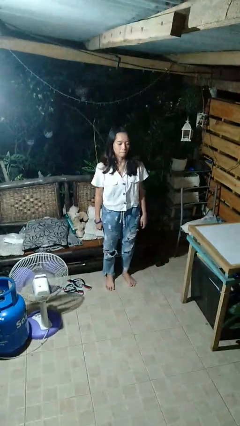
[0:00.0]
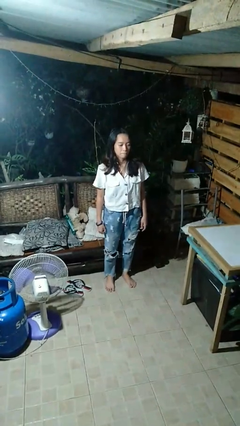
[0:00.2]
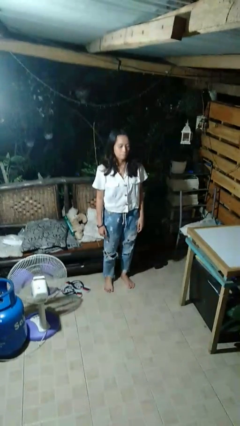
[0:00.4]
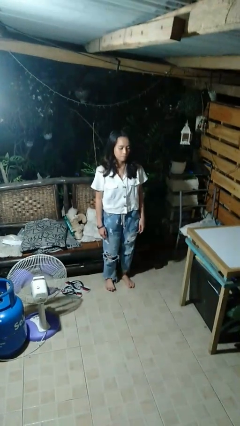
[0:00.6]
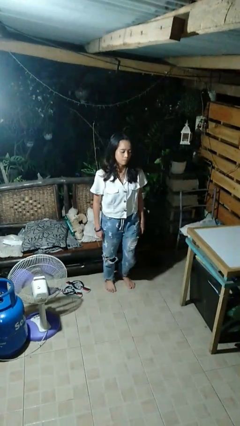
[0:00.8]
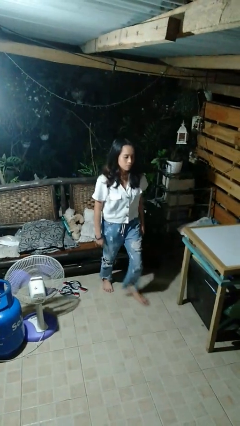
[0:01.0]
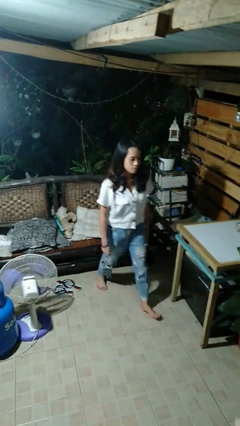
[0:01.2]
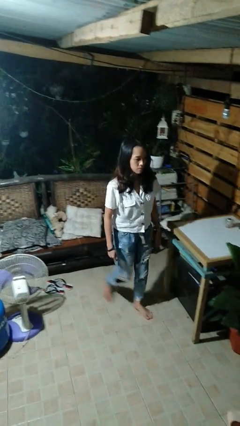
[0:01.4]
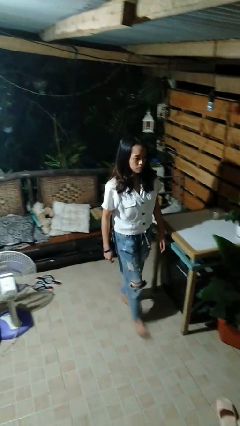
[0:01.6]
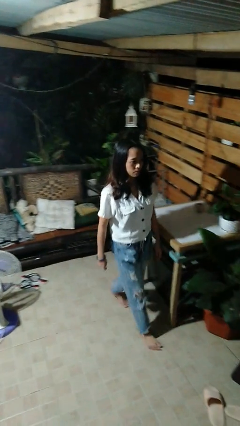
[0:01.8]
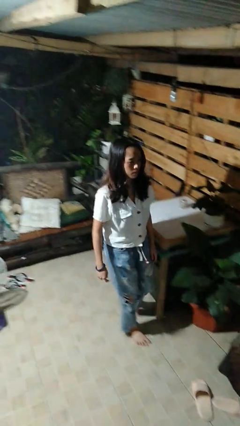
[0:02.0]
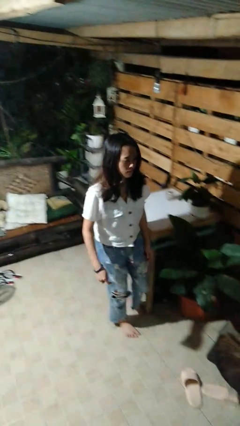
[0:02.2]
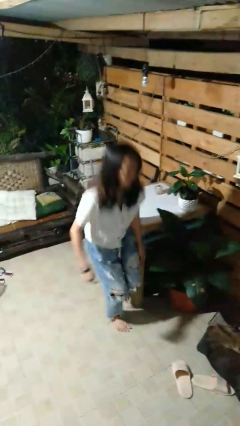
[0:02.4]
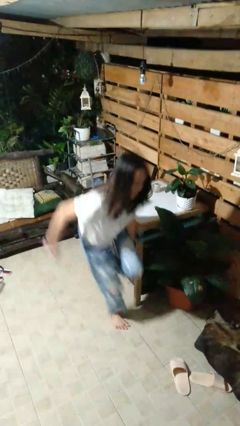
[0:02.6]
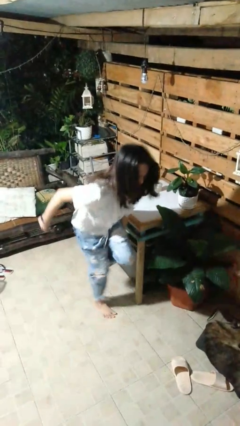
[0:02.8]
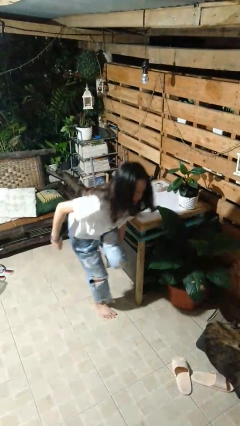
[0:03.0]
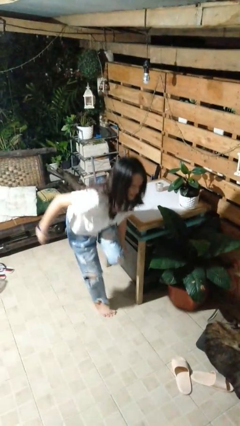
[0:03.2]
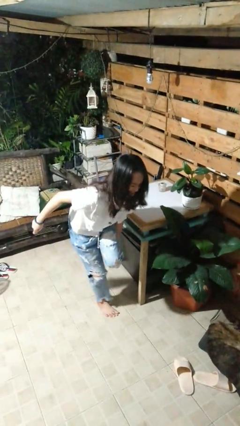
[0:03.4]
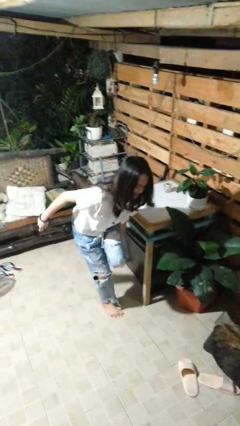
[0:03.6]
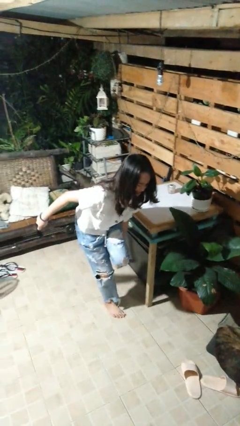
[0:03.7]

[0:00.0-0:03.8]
person stubs toe

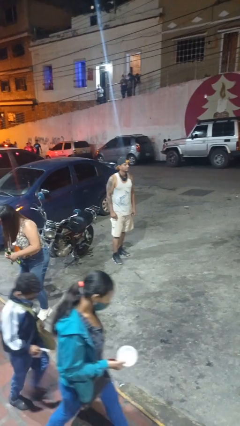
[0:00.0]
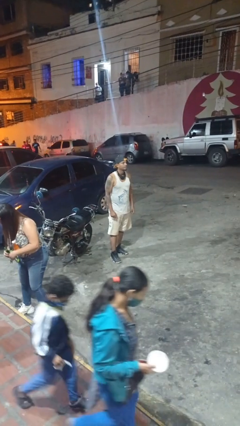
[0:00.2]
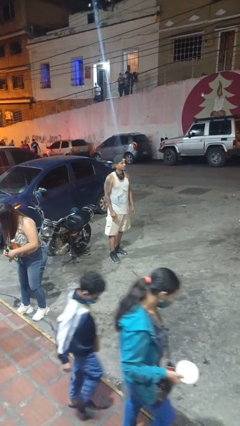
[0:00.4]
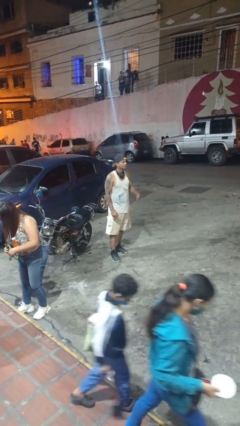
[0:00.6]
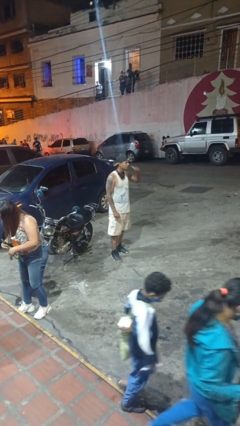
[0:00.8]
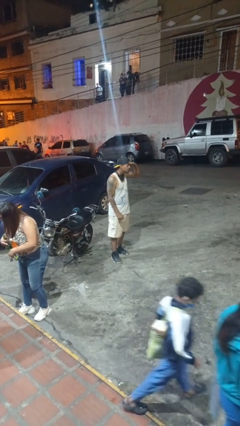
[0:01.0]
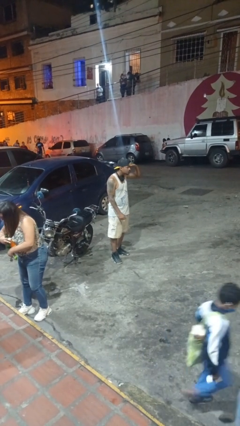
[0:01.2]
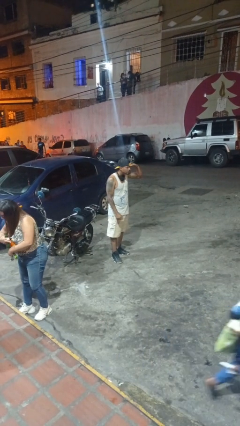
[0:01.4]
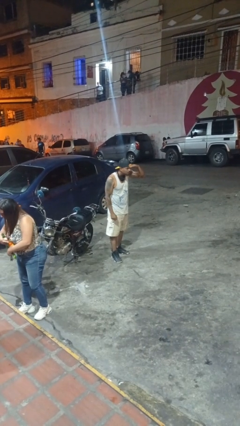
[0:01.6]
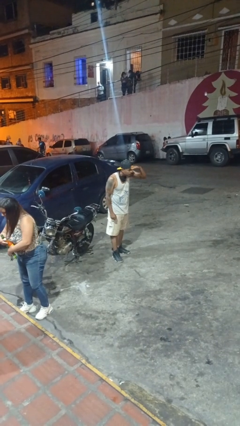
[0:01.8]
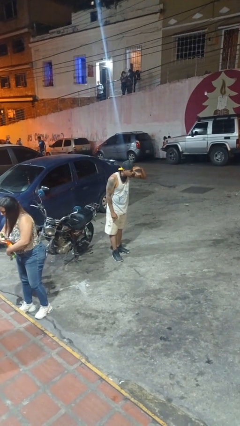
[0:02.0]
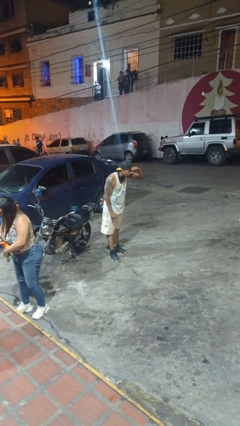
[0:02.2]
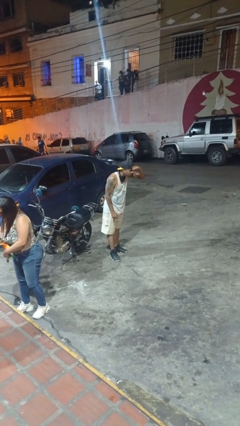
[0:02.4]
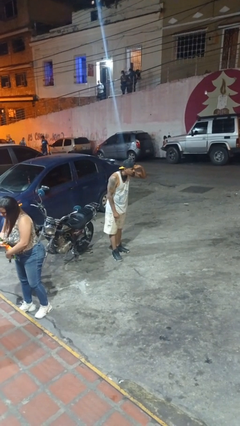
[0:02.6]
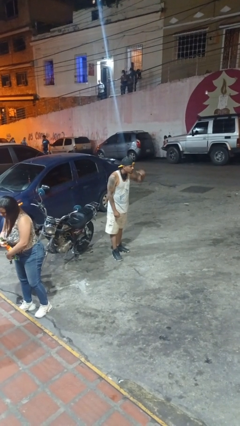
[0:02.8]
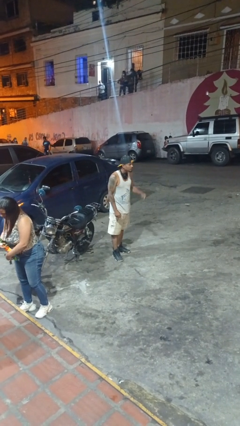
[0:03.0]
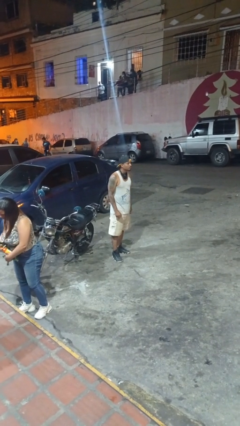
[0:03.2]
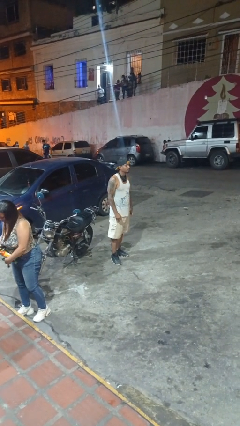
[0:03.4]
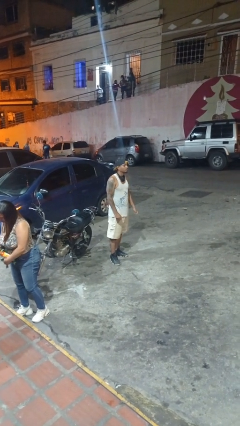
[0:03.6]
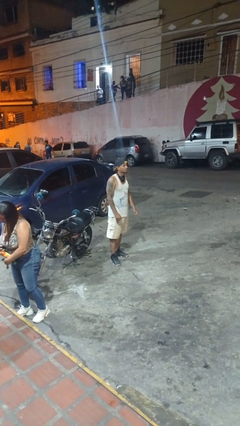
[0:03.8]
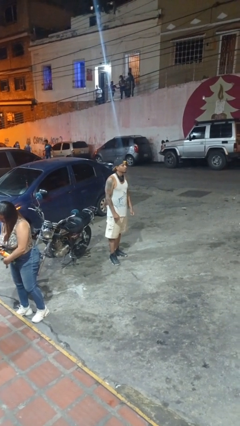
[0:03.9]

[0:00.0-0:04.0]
person shades eyes

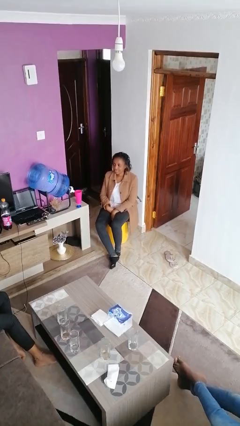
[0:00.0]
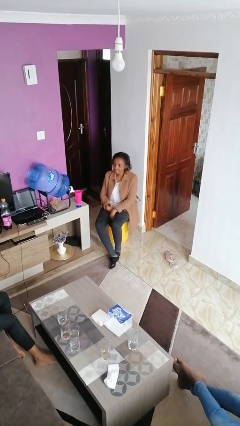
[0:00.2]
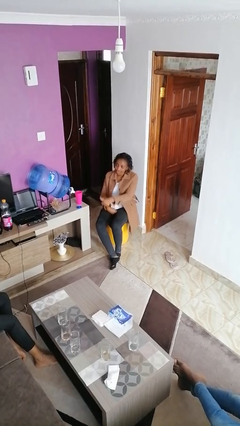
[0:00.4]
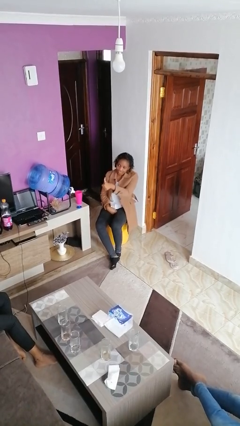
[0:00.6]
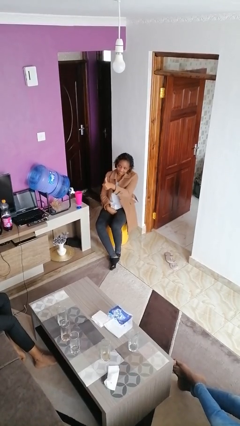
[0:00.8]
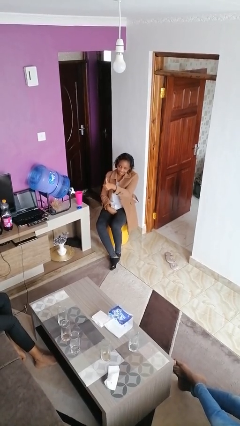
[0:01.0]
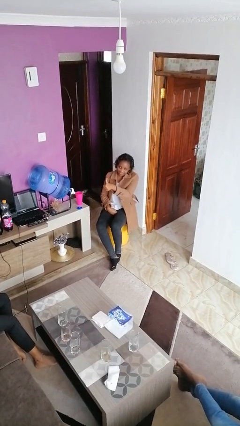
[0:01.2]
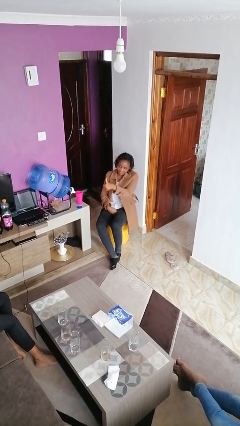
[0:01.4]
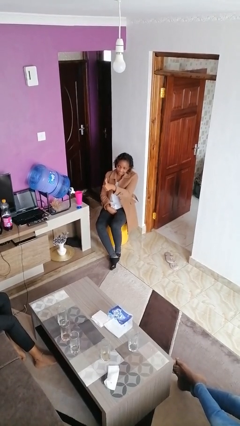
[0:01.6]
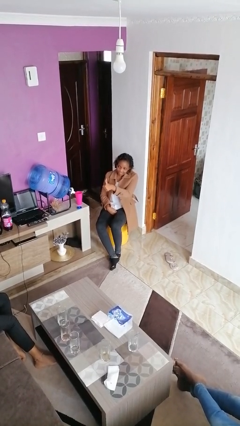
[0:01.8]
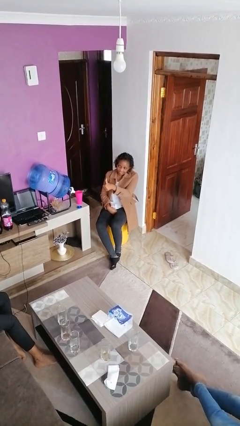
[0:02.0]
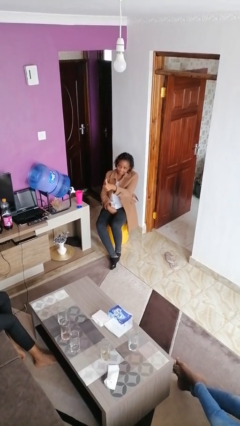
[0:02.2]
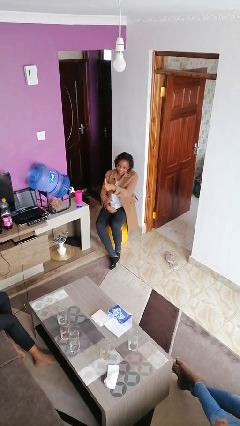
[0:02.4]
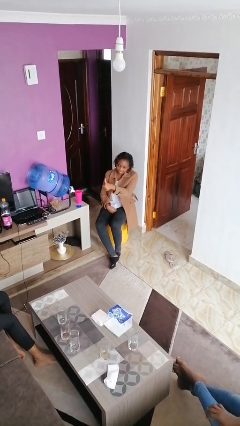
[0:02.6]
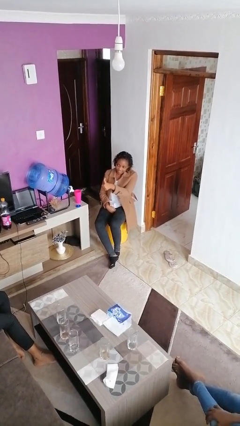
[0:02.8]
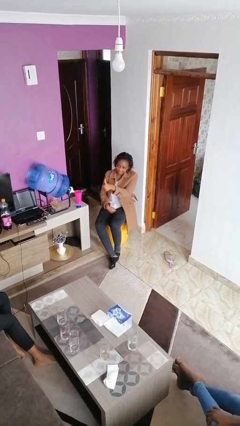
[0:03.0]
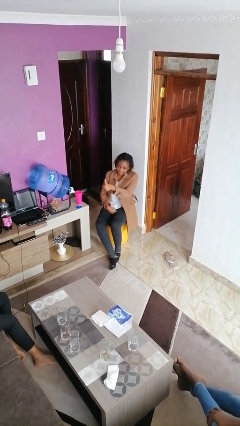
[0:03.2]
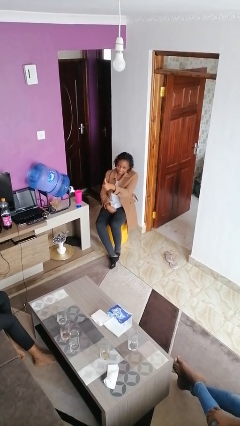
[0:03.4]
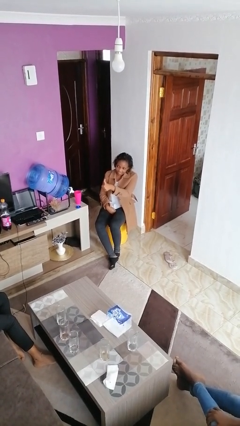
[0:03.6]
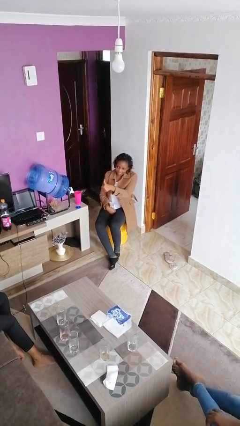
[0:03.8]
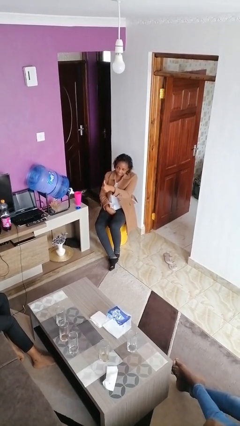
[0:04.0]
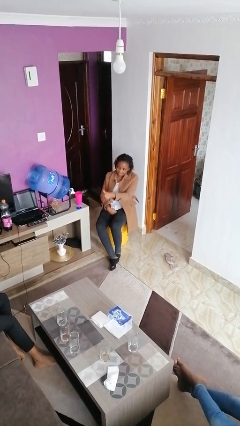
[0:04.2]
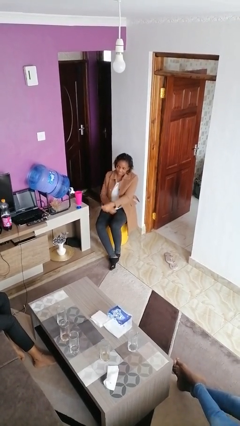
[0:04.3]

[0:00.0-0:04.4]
person gestures thumbs up

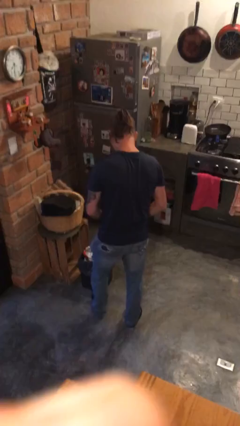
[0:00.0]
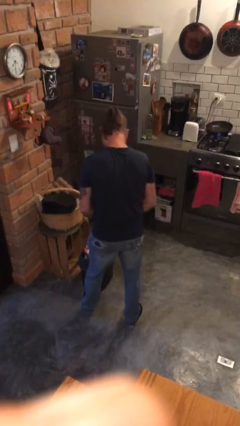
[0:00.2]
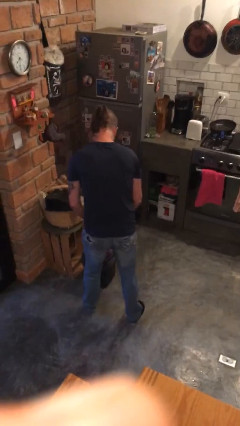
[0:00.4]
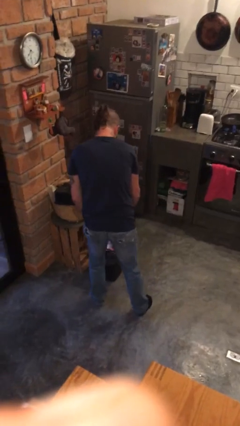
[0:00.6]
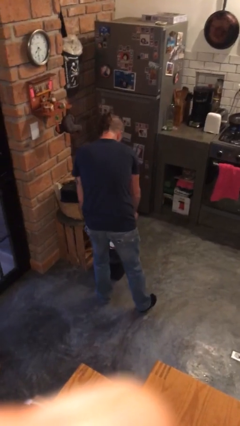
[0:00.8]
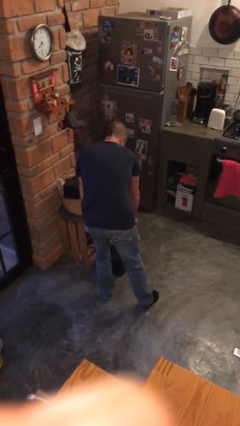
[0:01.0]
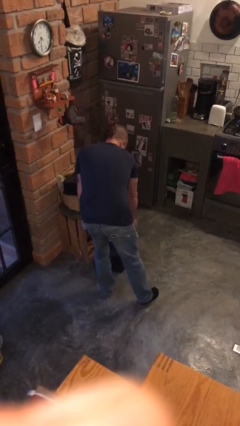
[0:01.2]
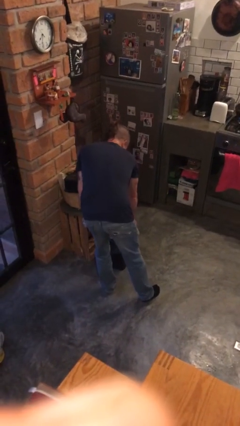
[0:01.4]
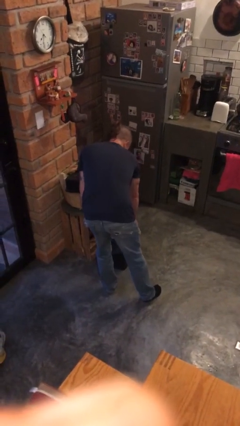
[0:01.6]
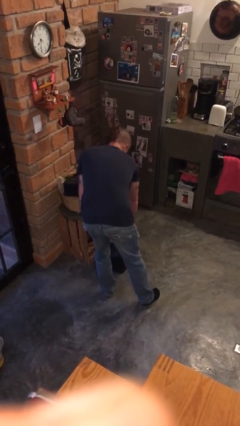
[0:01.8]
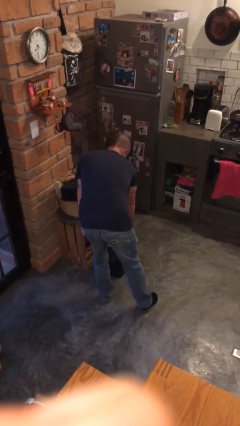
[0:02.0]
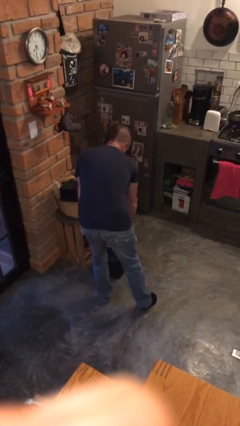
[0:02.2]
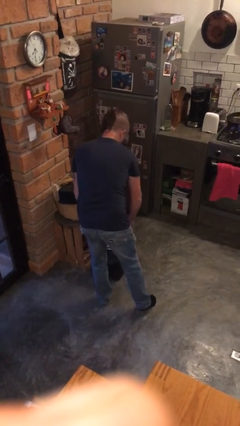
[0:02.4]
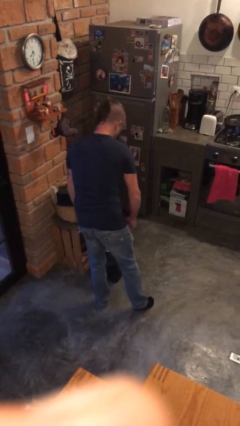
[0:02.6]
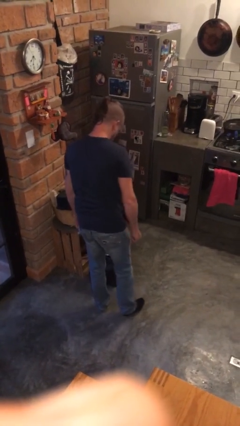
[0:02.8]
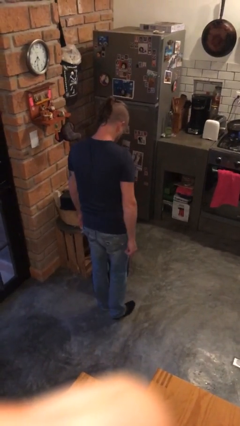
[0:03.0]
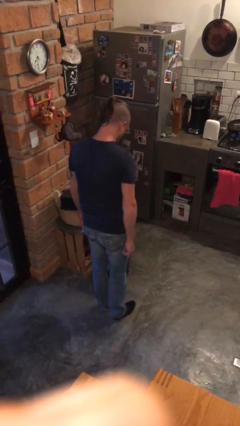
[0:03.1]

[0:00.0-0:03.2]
person discards trash

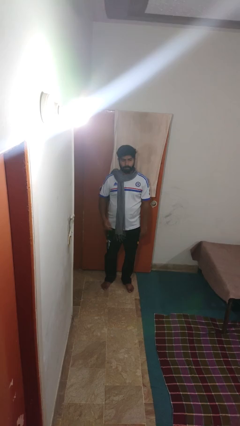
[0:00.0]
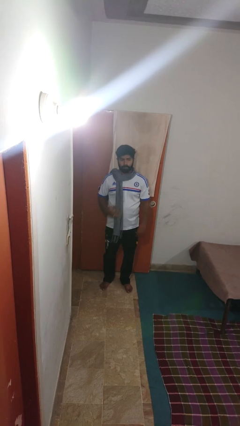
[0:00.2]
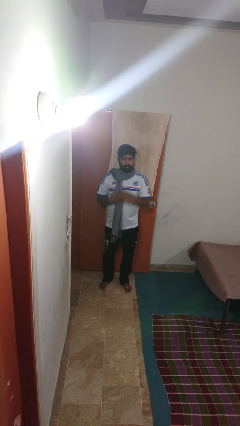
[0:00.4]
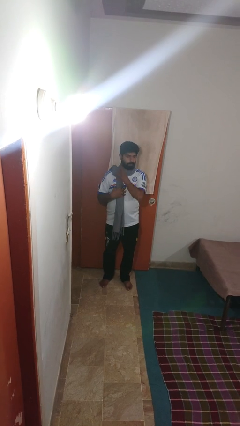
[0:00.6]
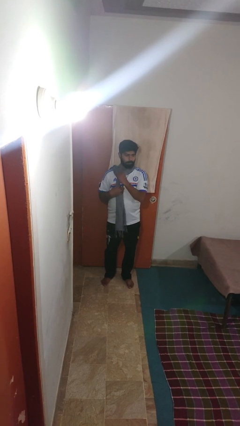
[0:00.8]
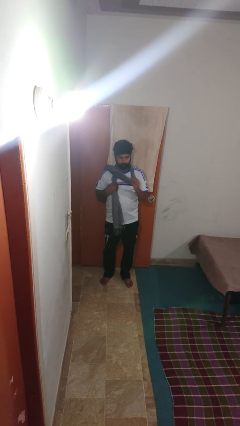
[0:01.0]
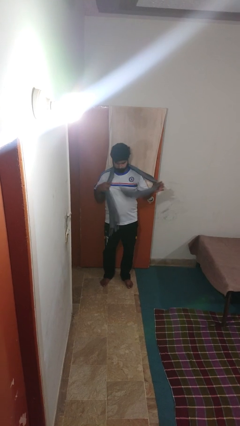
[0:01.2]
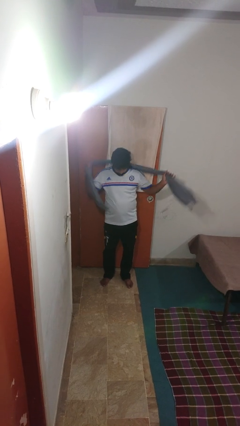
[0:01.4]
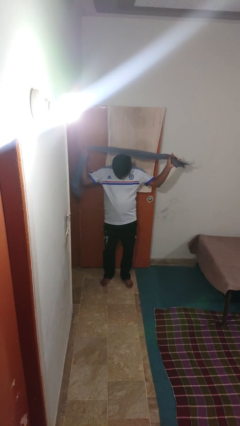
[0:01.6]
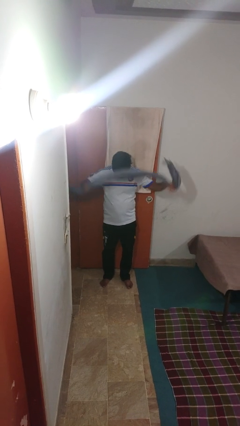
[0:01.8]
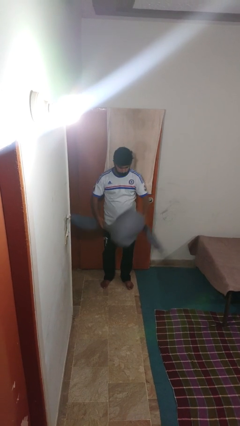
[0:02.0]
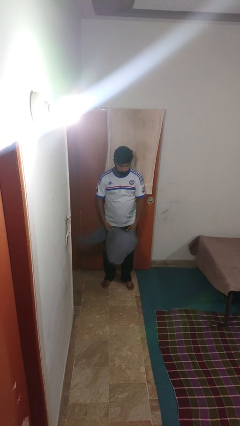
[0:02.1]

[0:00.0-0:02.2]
person takes off scarf
